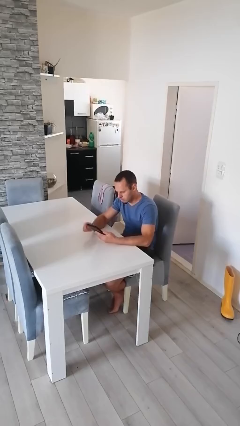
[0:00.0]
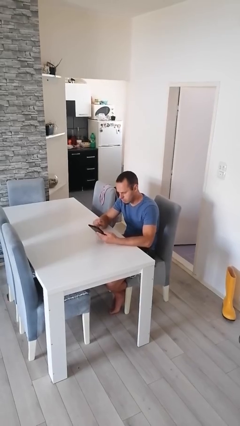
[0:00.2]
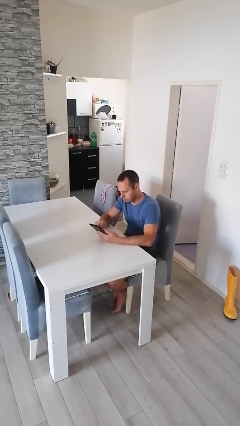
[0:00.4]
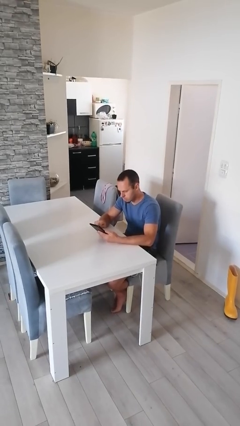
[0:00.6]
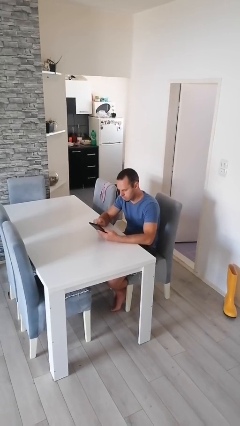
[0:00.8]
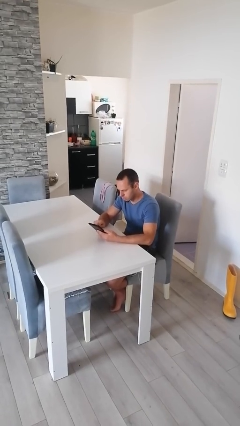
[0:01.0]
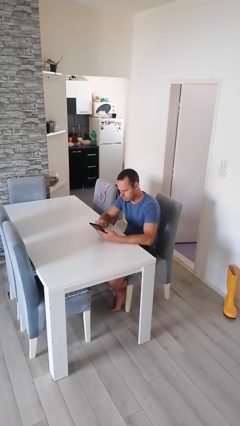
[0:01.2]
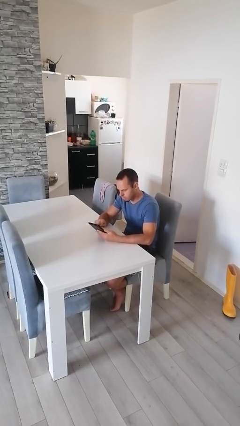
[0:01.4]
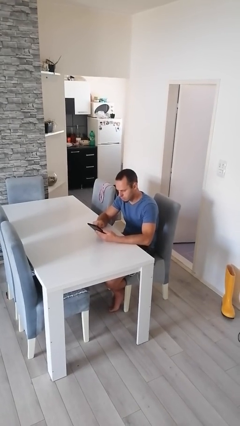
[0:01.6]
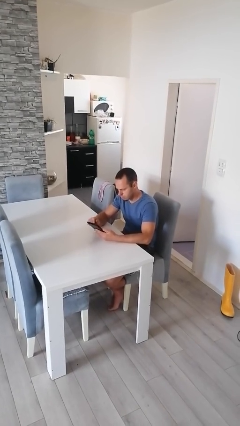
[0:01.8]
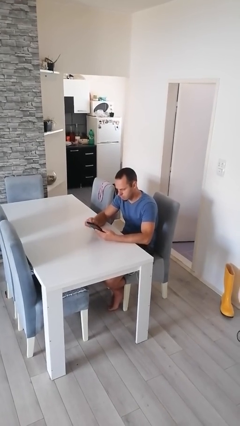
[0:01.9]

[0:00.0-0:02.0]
person interacts with tablet

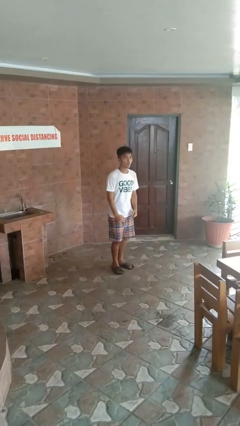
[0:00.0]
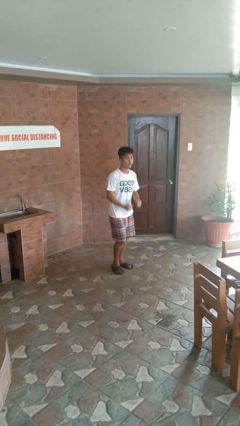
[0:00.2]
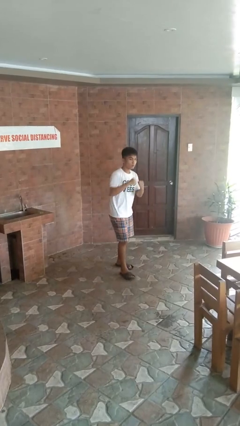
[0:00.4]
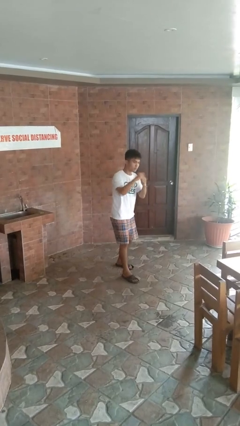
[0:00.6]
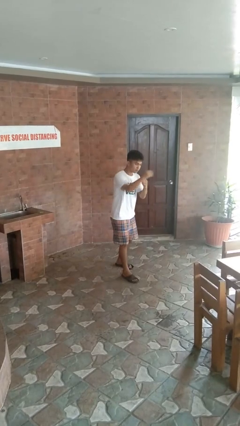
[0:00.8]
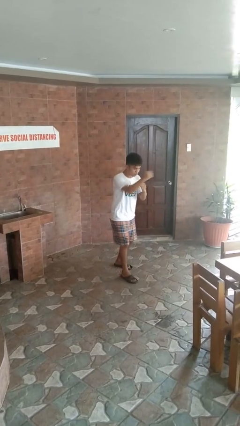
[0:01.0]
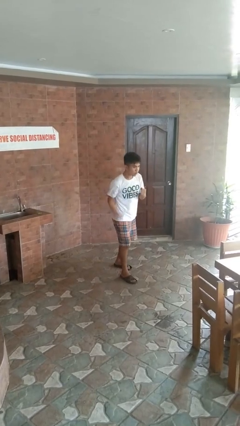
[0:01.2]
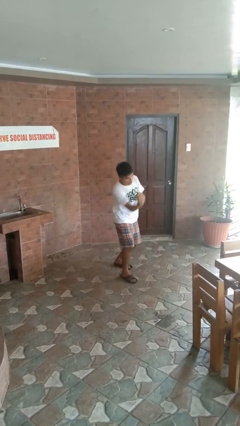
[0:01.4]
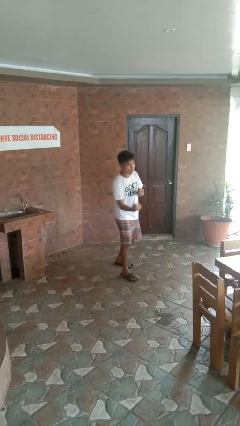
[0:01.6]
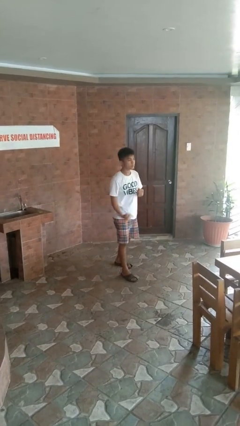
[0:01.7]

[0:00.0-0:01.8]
person punches

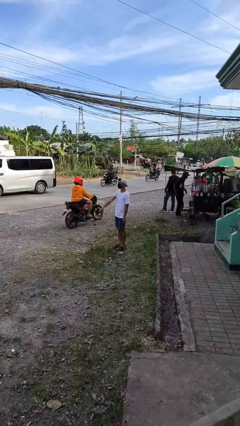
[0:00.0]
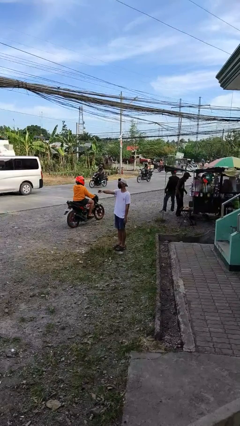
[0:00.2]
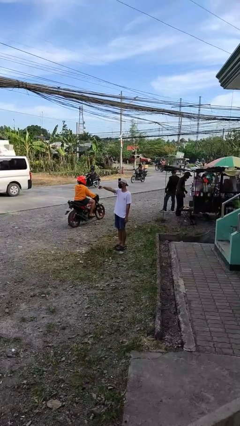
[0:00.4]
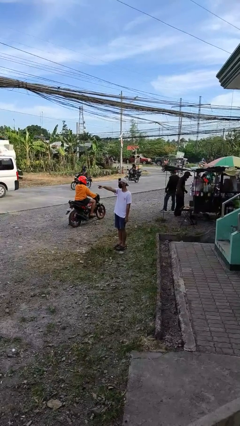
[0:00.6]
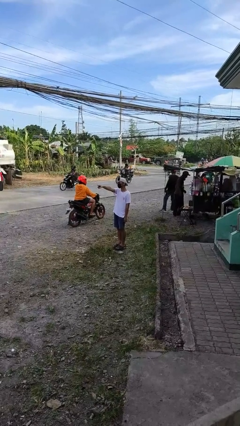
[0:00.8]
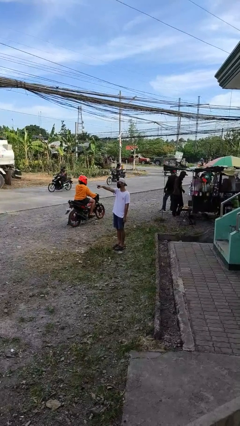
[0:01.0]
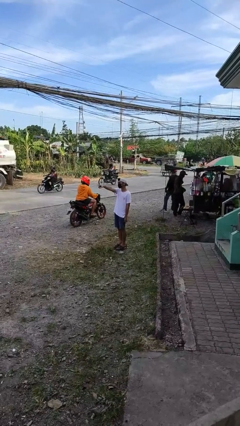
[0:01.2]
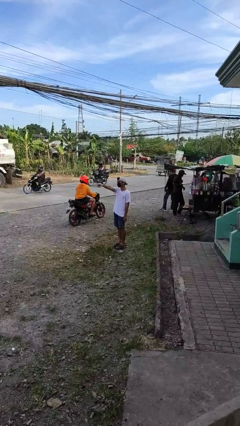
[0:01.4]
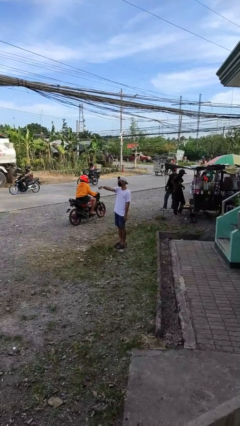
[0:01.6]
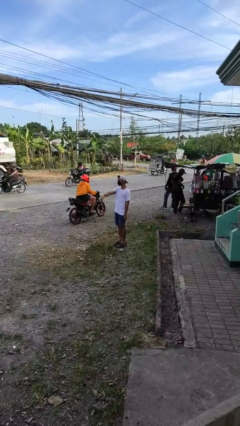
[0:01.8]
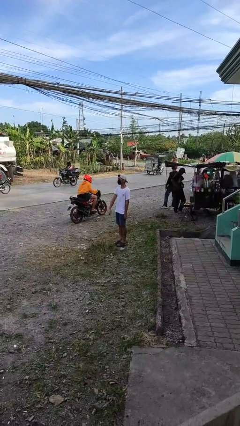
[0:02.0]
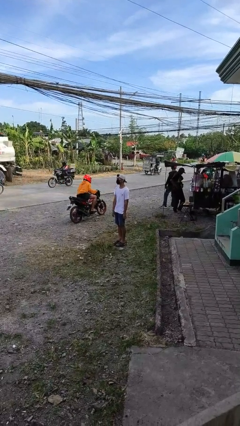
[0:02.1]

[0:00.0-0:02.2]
person points at person

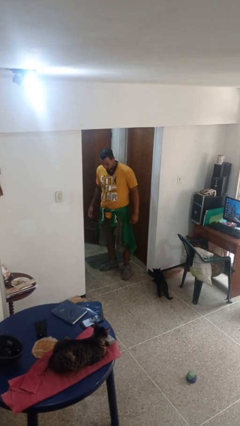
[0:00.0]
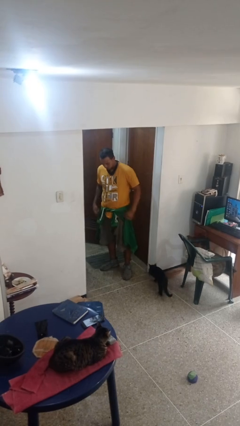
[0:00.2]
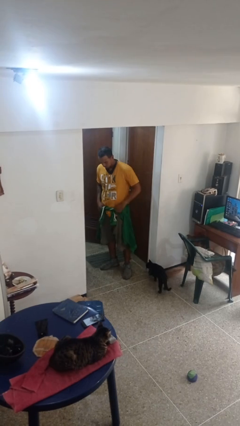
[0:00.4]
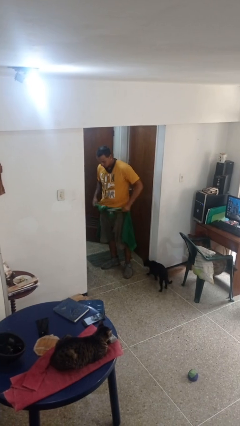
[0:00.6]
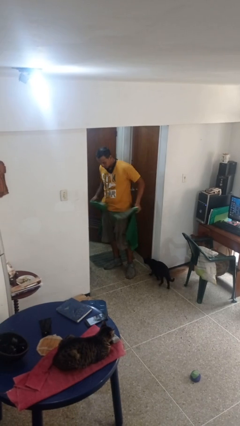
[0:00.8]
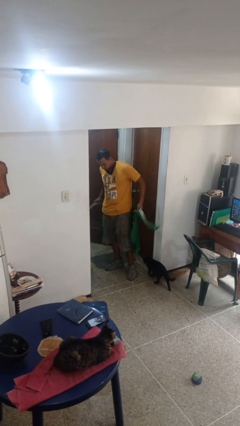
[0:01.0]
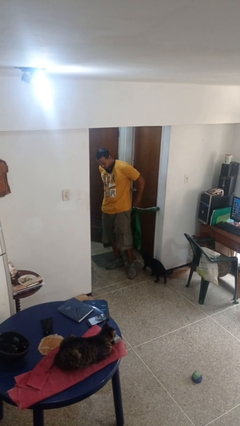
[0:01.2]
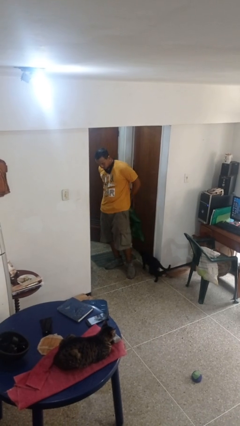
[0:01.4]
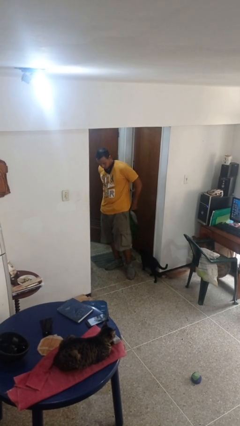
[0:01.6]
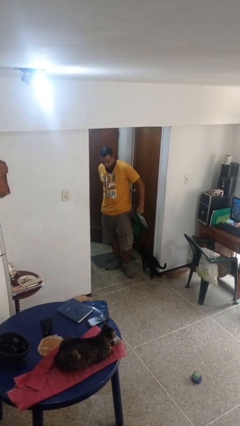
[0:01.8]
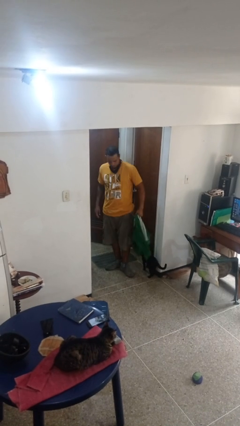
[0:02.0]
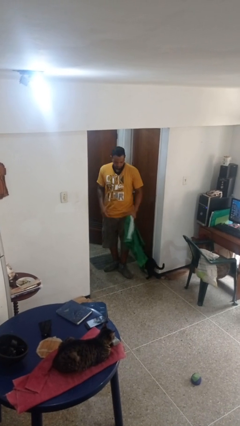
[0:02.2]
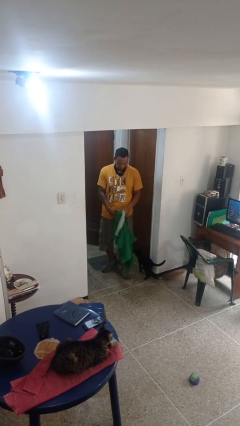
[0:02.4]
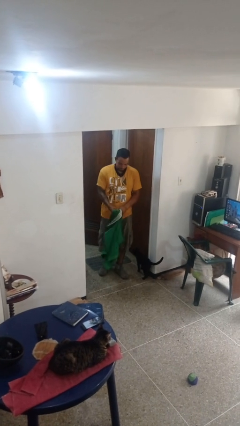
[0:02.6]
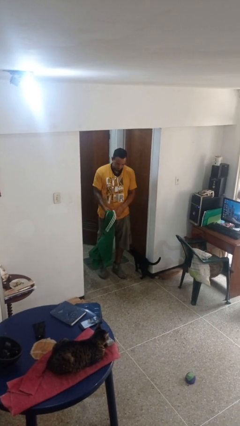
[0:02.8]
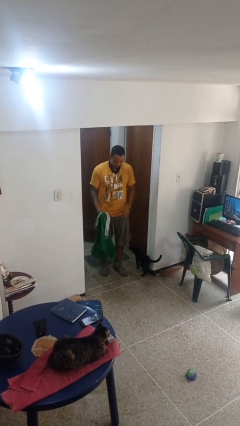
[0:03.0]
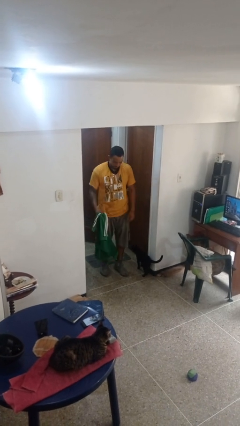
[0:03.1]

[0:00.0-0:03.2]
person unties jacket around waist

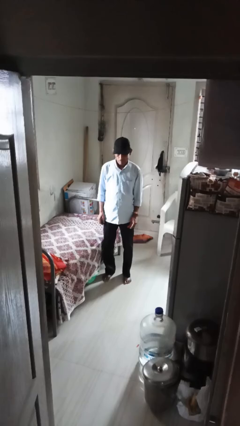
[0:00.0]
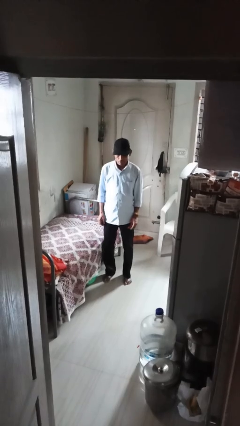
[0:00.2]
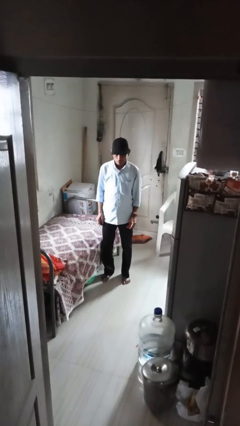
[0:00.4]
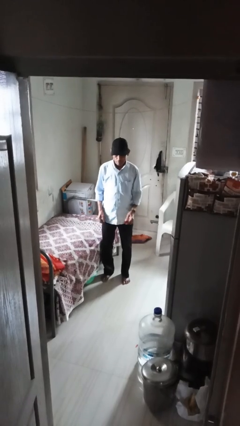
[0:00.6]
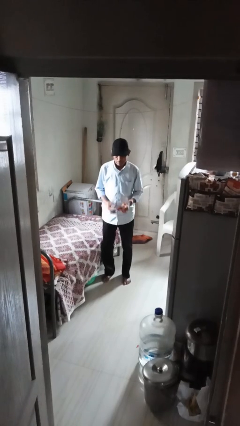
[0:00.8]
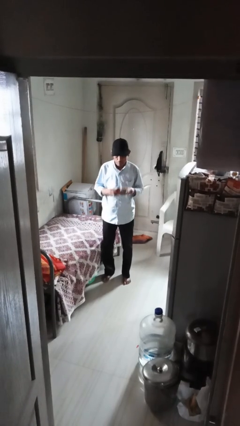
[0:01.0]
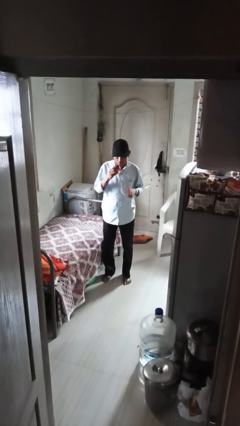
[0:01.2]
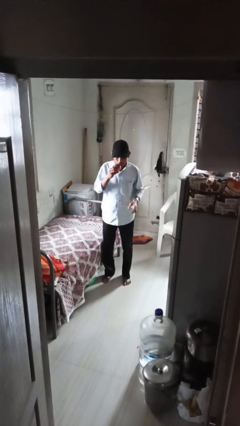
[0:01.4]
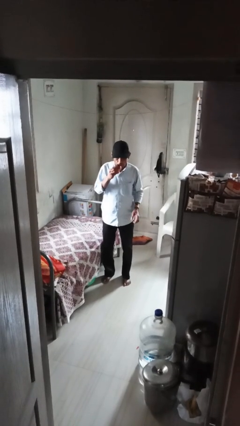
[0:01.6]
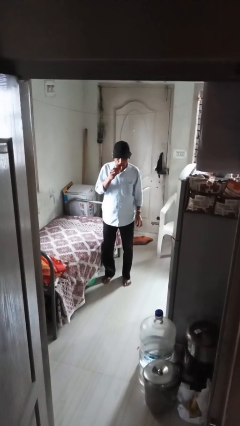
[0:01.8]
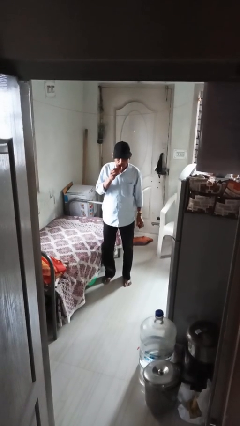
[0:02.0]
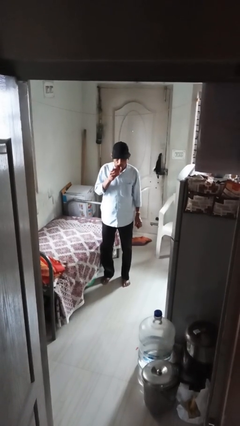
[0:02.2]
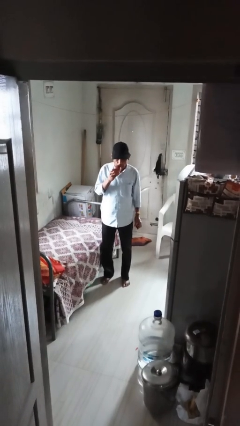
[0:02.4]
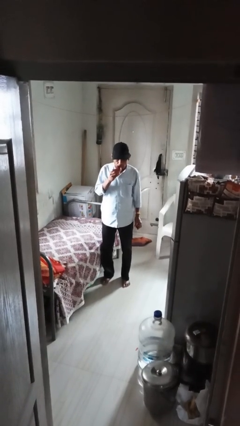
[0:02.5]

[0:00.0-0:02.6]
person eats apple

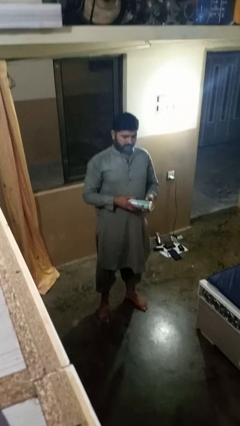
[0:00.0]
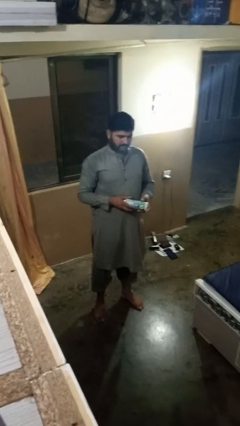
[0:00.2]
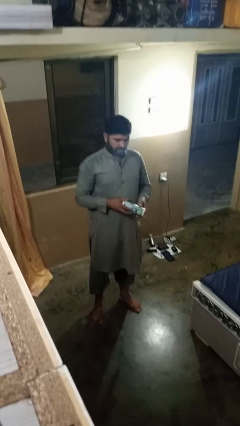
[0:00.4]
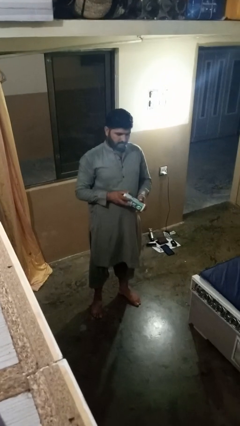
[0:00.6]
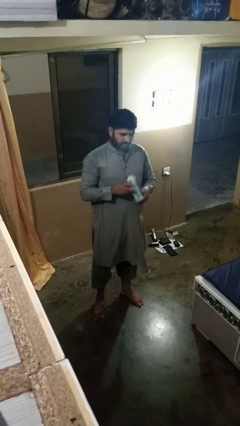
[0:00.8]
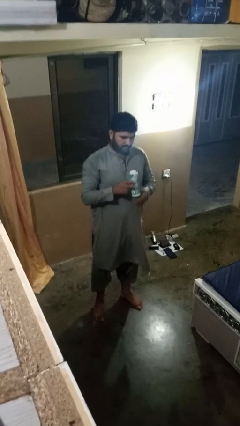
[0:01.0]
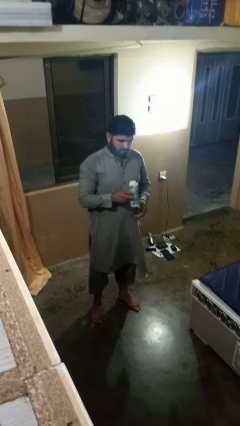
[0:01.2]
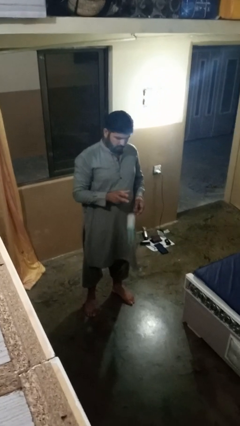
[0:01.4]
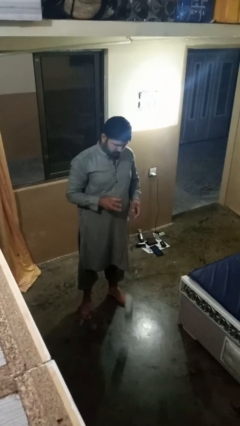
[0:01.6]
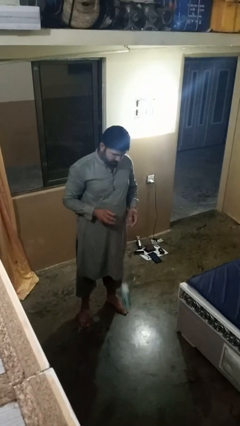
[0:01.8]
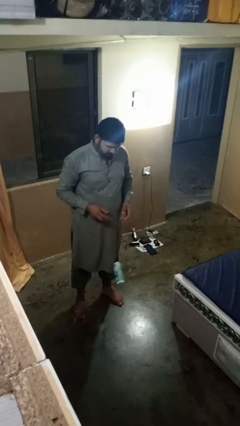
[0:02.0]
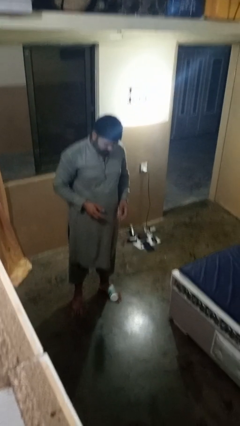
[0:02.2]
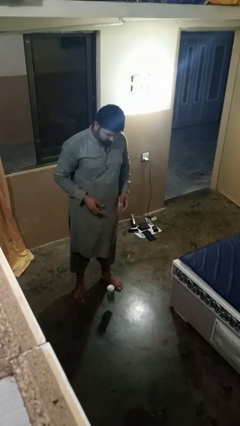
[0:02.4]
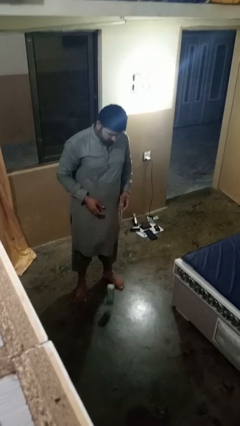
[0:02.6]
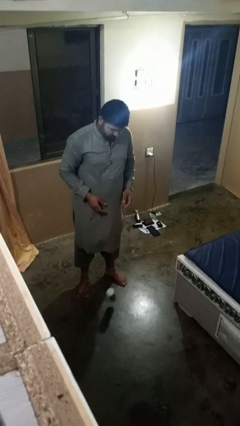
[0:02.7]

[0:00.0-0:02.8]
person throws object into air

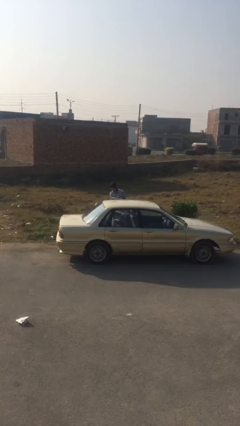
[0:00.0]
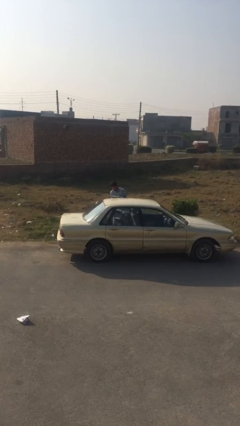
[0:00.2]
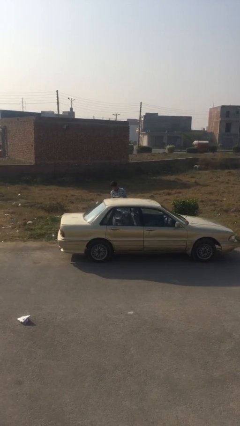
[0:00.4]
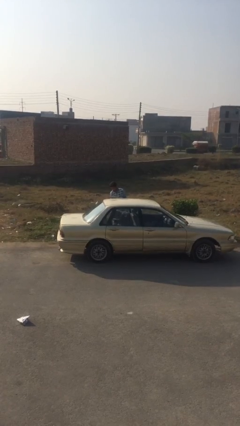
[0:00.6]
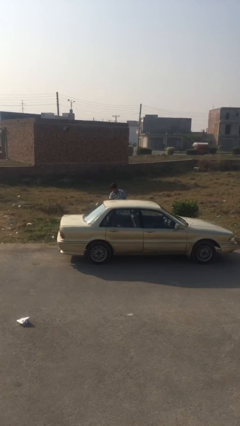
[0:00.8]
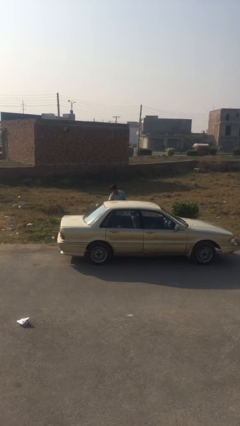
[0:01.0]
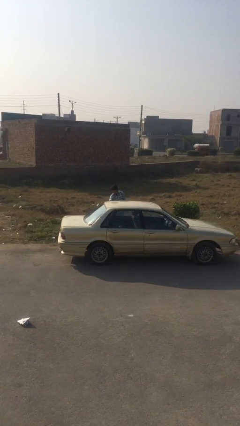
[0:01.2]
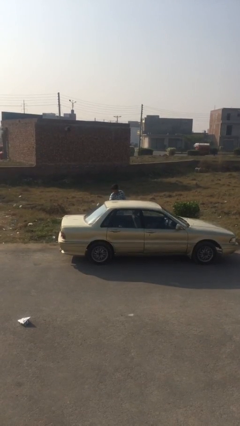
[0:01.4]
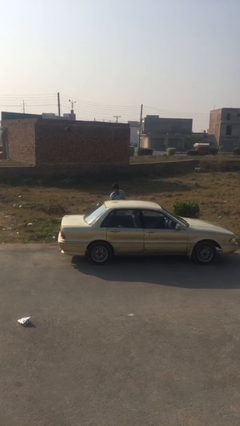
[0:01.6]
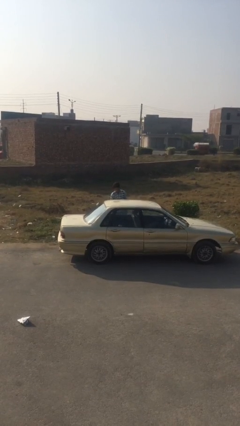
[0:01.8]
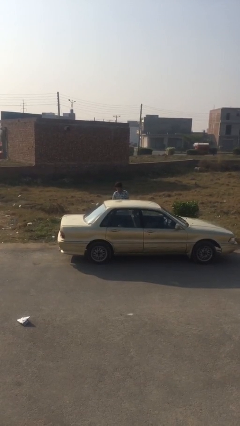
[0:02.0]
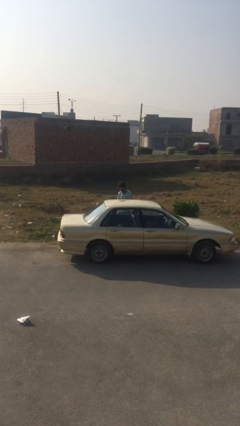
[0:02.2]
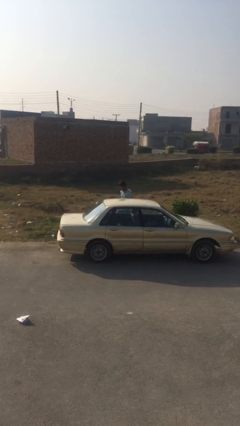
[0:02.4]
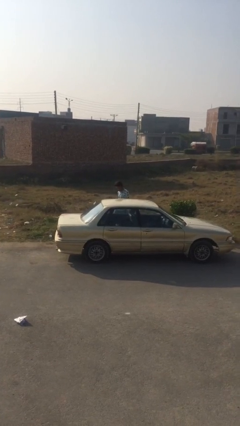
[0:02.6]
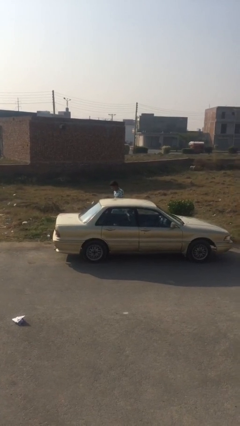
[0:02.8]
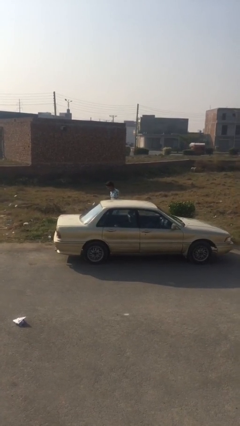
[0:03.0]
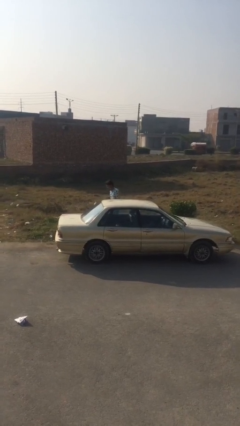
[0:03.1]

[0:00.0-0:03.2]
person closes car door
